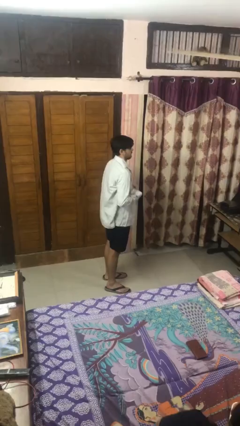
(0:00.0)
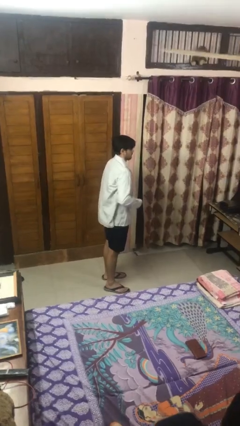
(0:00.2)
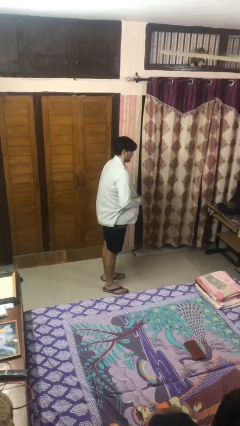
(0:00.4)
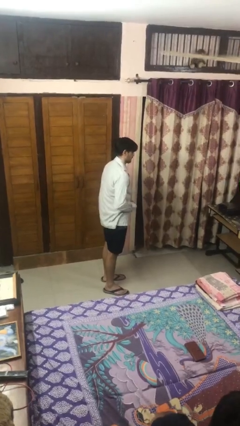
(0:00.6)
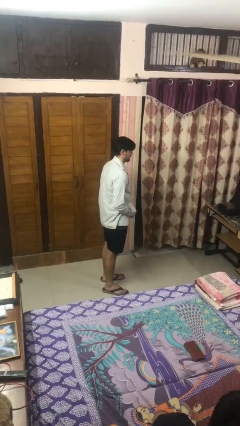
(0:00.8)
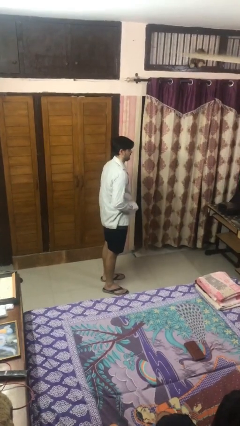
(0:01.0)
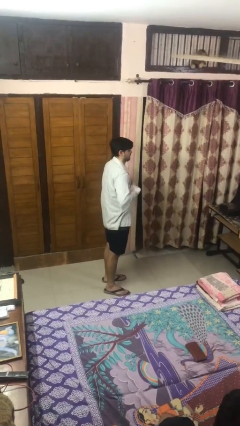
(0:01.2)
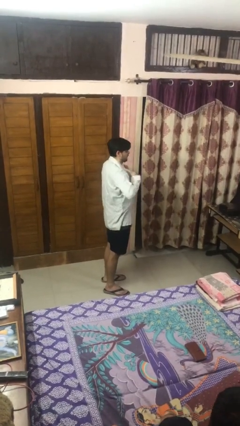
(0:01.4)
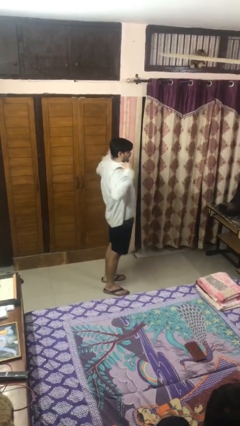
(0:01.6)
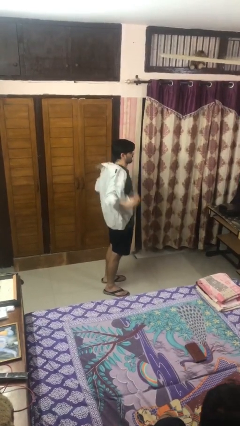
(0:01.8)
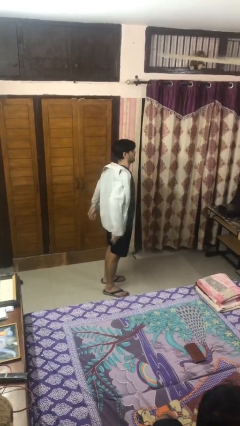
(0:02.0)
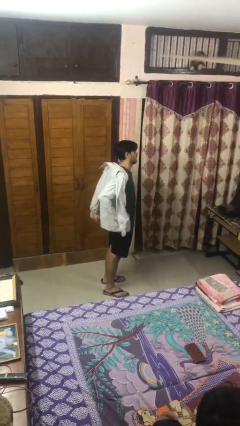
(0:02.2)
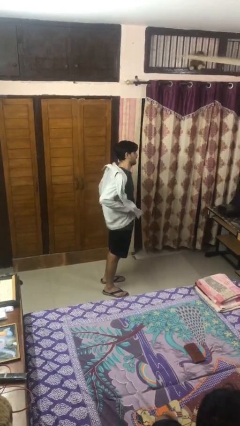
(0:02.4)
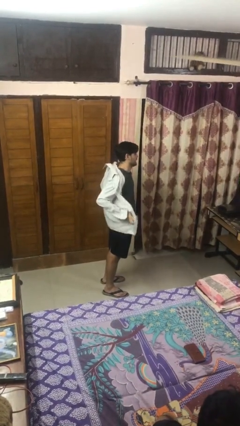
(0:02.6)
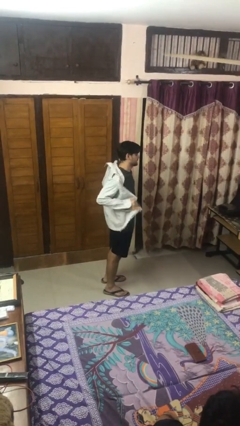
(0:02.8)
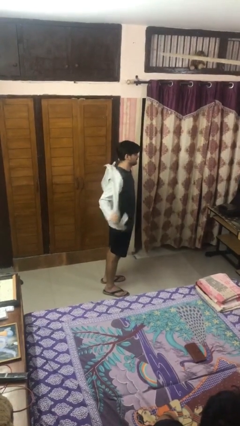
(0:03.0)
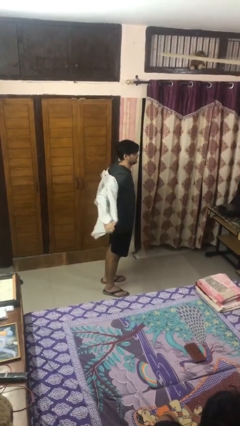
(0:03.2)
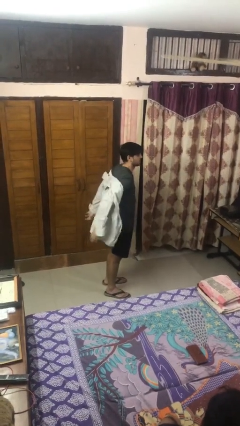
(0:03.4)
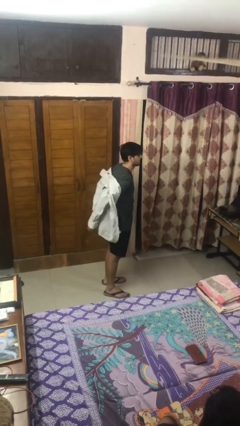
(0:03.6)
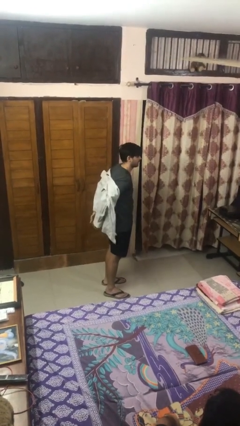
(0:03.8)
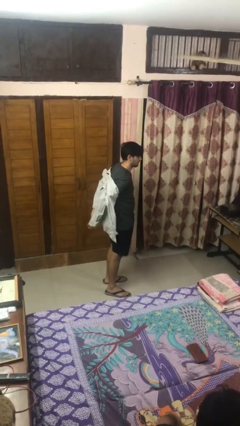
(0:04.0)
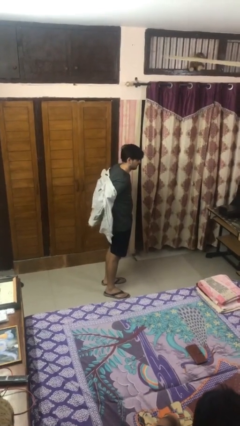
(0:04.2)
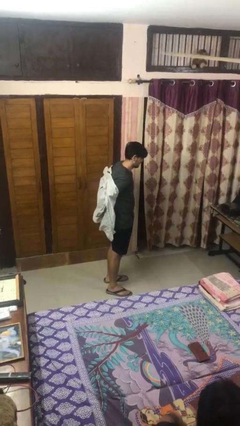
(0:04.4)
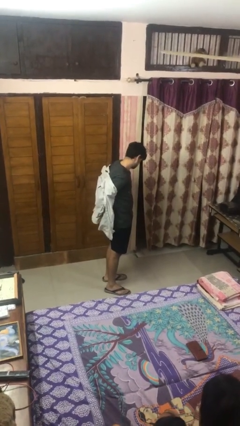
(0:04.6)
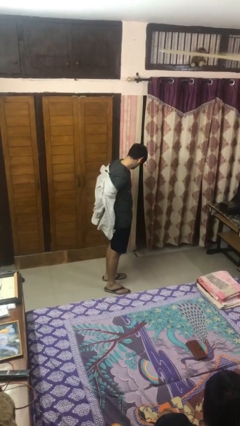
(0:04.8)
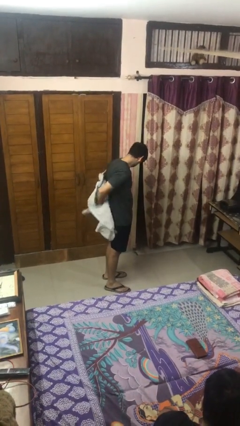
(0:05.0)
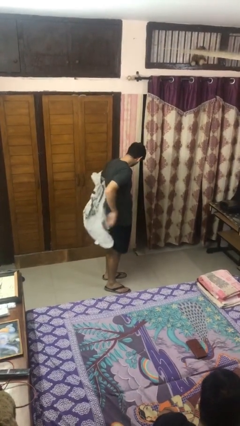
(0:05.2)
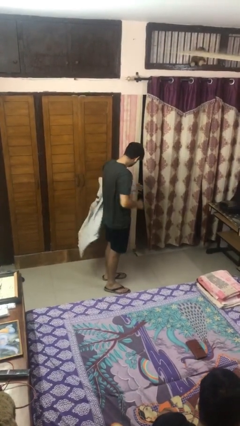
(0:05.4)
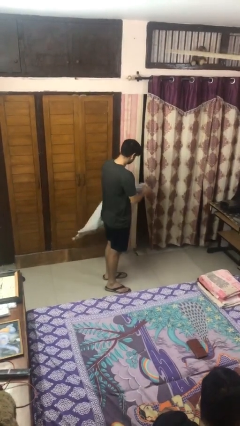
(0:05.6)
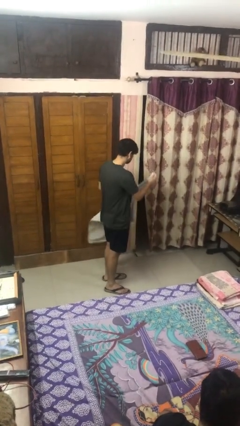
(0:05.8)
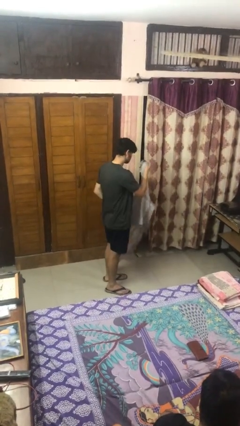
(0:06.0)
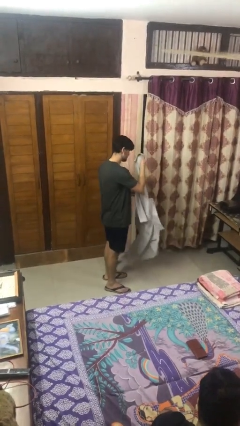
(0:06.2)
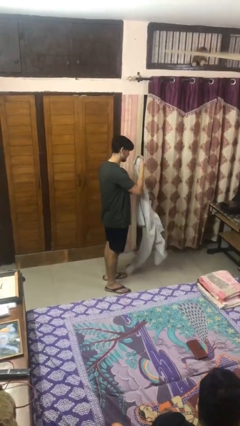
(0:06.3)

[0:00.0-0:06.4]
person takes off shirt

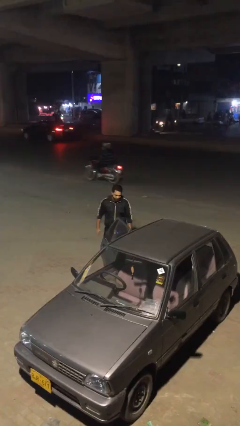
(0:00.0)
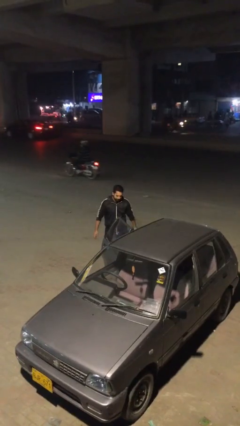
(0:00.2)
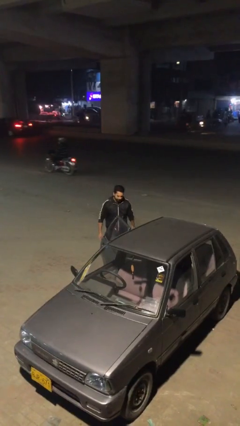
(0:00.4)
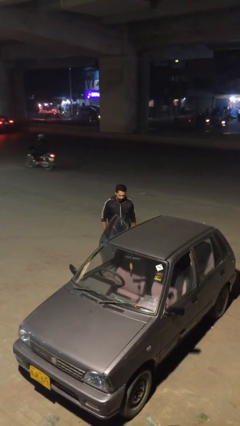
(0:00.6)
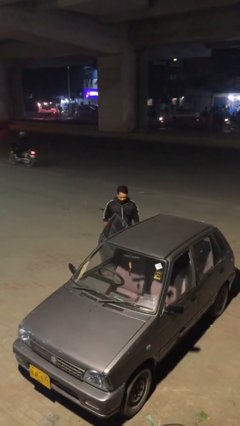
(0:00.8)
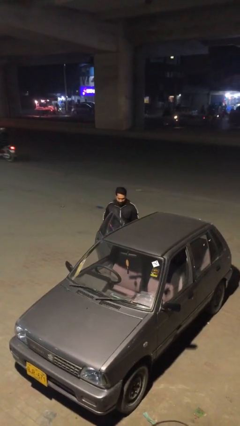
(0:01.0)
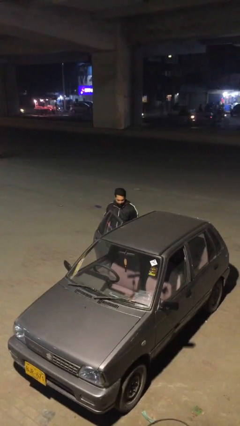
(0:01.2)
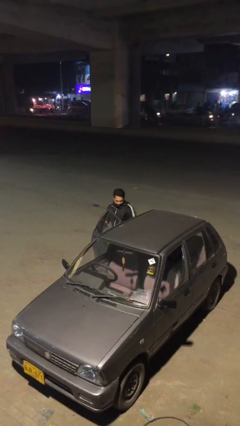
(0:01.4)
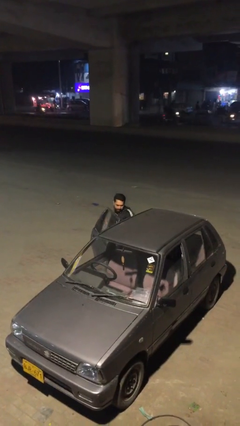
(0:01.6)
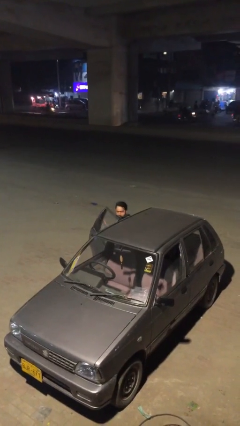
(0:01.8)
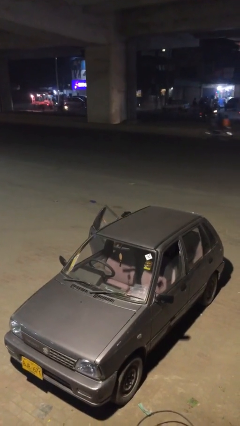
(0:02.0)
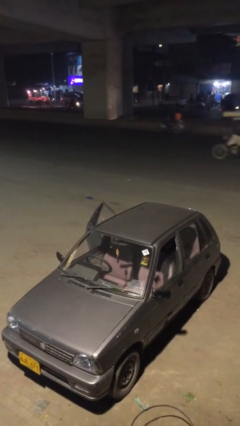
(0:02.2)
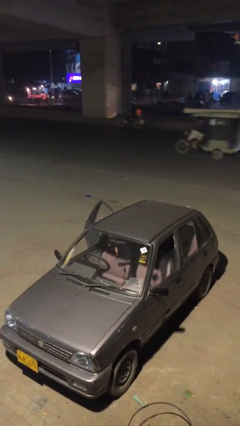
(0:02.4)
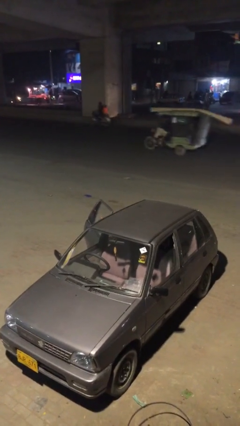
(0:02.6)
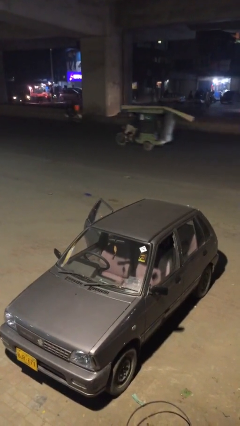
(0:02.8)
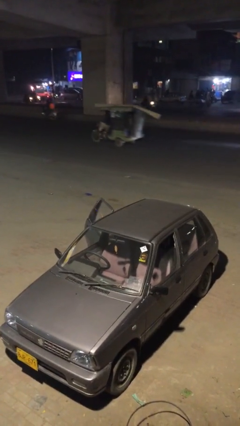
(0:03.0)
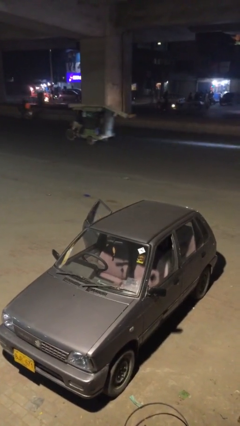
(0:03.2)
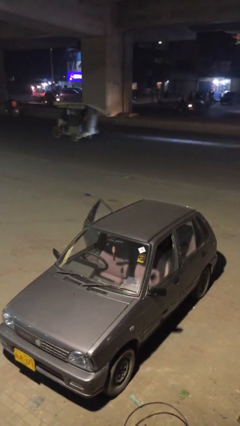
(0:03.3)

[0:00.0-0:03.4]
person enters car

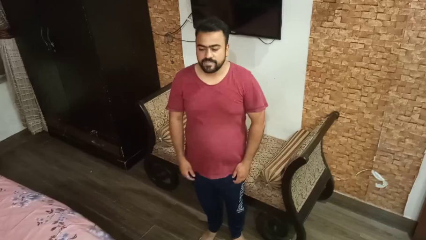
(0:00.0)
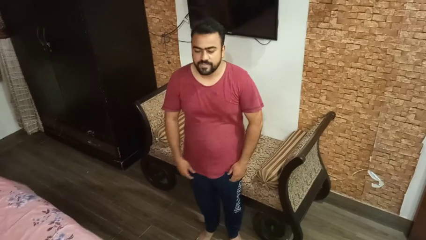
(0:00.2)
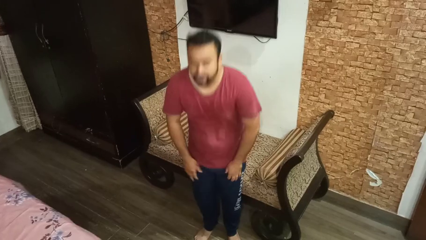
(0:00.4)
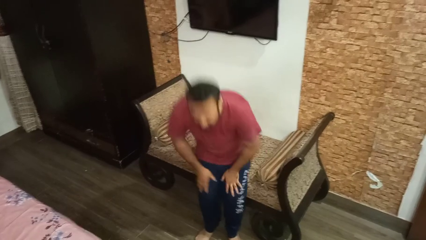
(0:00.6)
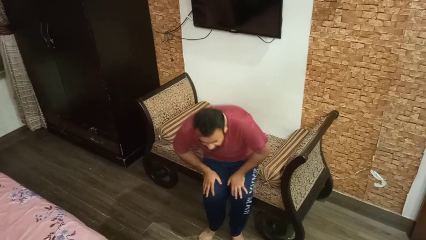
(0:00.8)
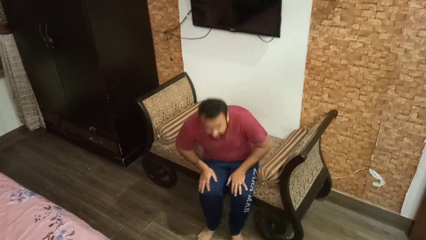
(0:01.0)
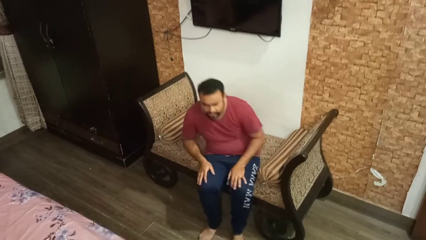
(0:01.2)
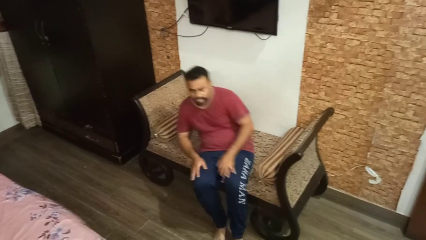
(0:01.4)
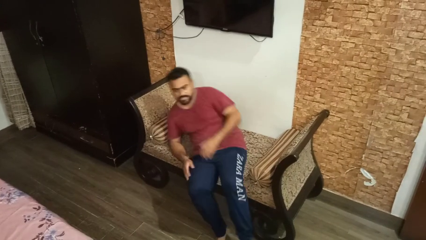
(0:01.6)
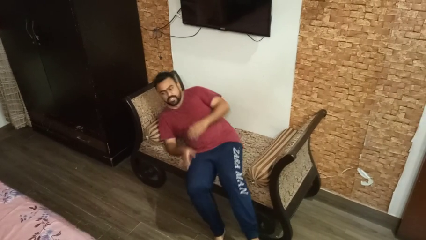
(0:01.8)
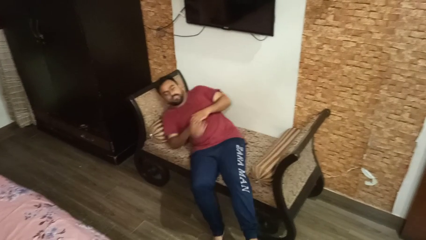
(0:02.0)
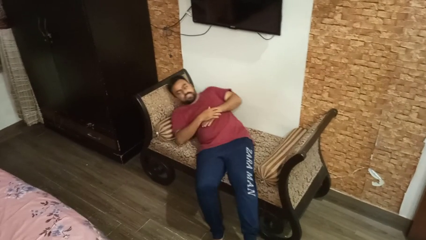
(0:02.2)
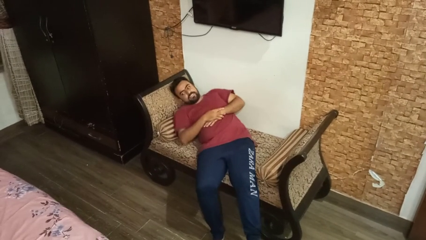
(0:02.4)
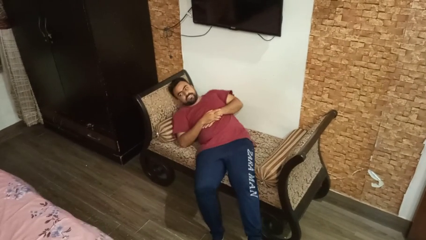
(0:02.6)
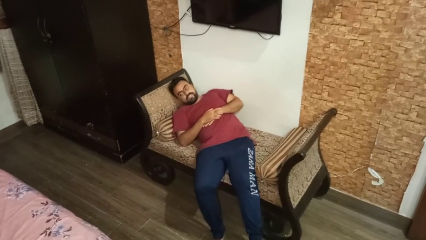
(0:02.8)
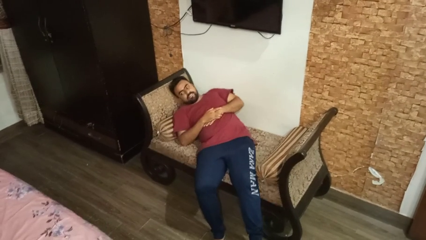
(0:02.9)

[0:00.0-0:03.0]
person lies down on couch

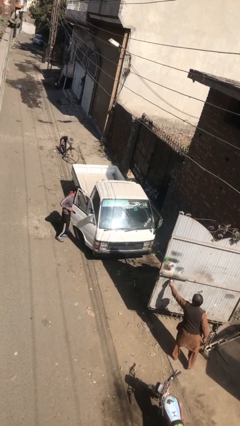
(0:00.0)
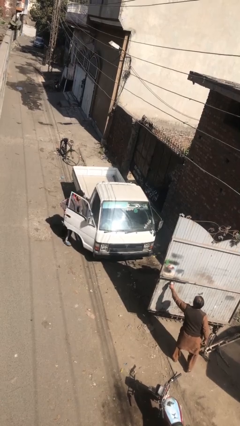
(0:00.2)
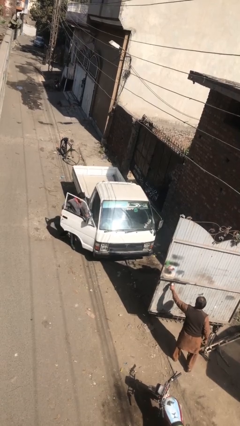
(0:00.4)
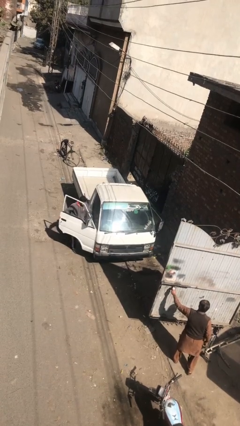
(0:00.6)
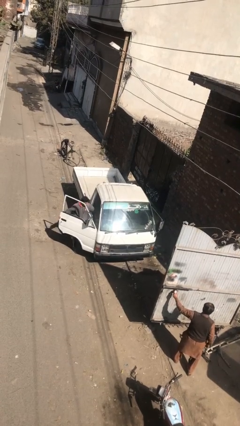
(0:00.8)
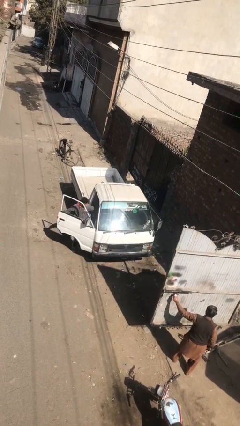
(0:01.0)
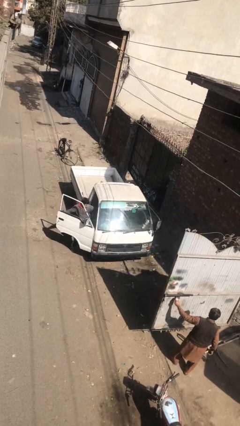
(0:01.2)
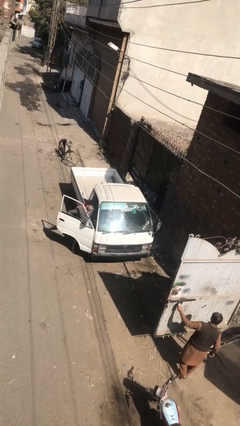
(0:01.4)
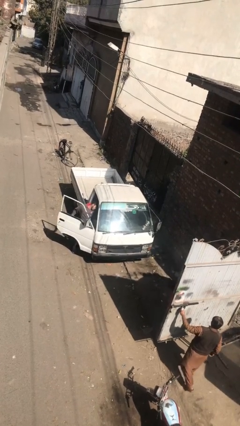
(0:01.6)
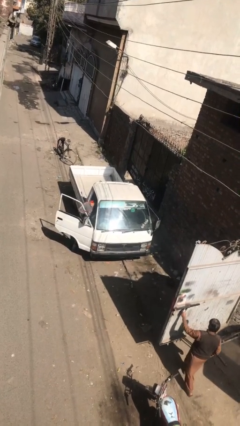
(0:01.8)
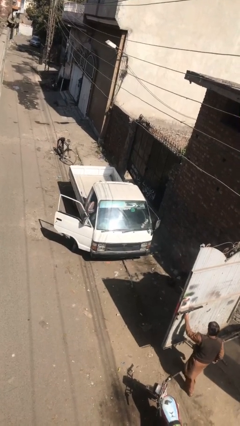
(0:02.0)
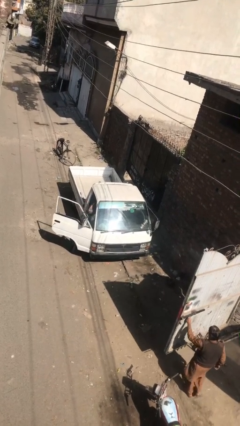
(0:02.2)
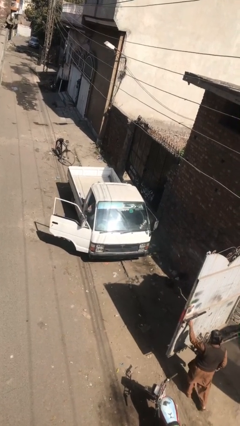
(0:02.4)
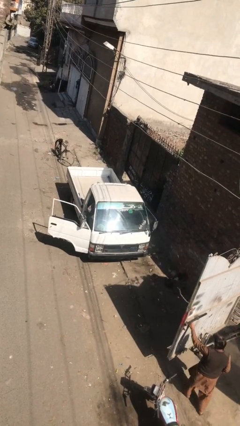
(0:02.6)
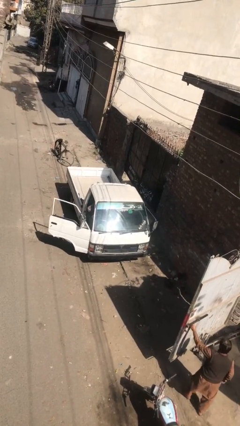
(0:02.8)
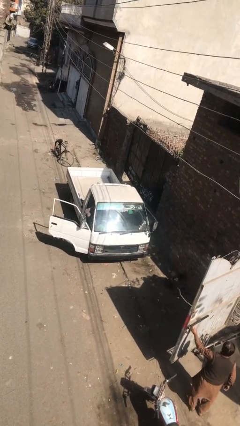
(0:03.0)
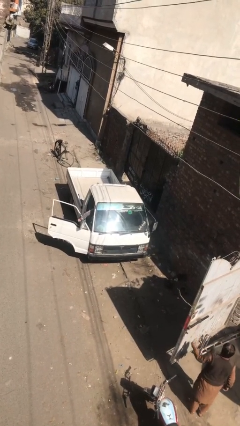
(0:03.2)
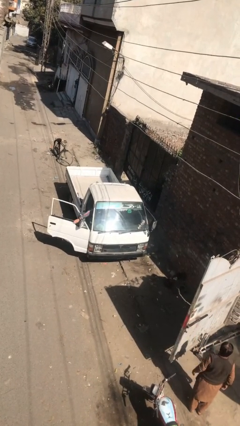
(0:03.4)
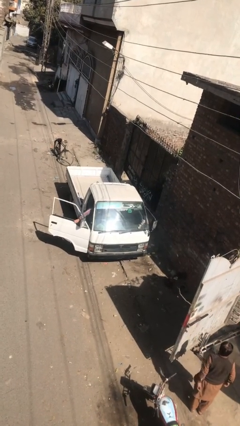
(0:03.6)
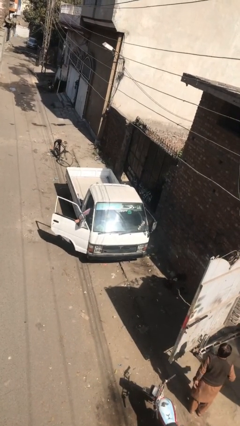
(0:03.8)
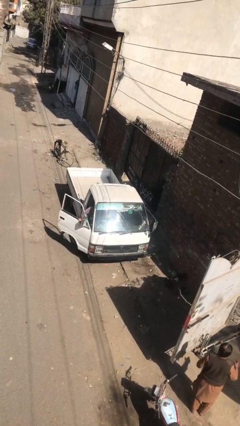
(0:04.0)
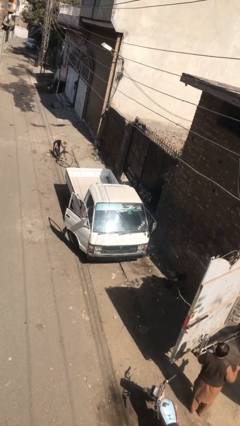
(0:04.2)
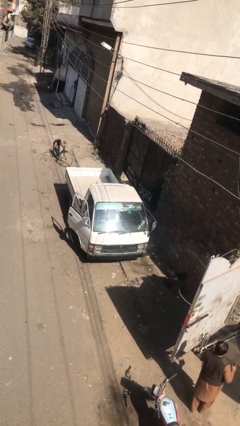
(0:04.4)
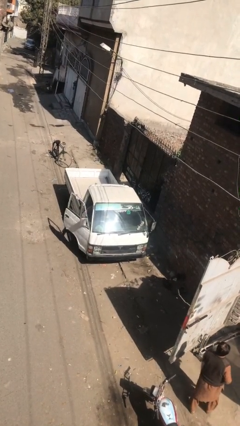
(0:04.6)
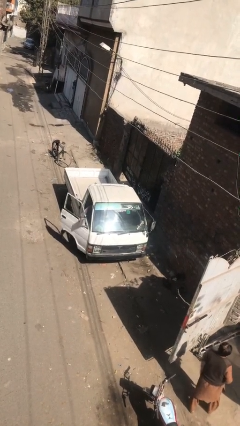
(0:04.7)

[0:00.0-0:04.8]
car picks up person
